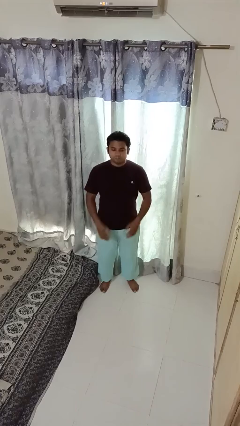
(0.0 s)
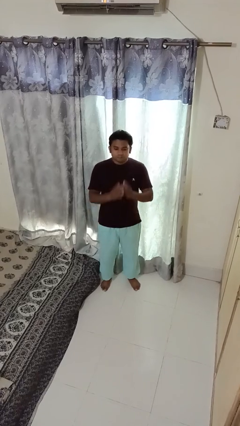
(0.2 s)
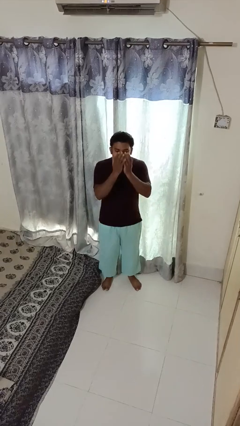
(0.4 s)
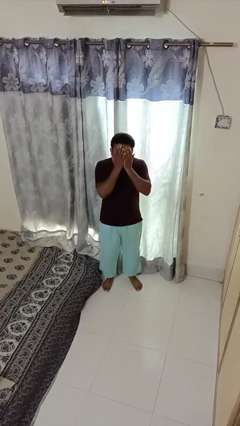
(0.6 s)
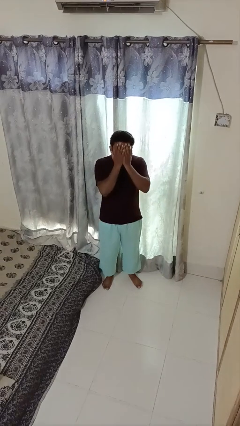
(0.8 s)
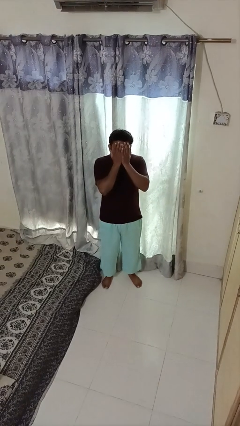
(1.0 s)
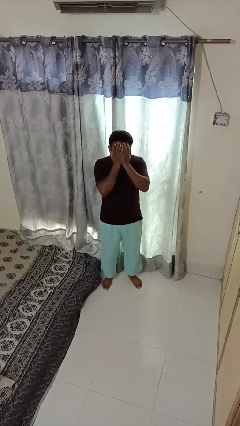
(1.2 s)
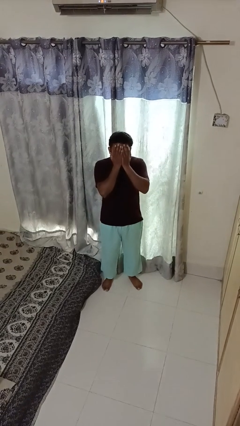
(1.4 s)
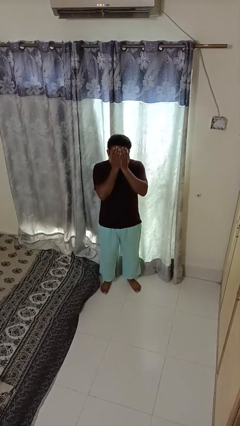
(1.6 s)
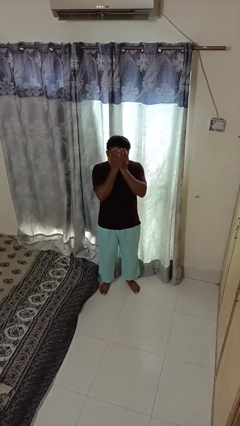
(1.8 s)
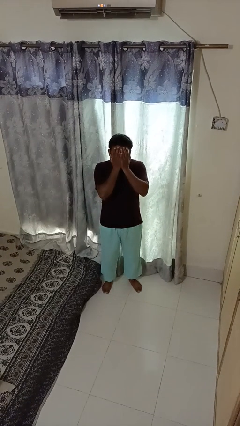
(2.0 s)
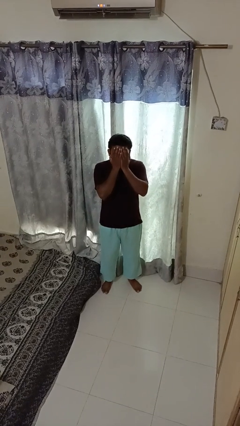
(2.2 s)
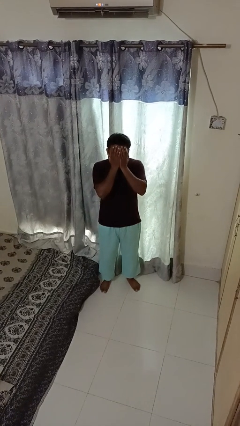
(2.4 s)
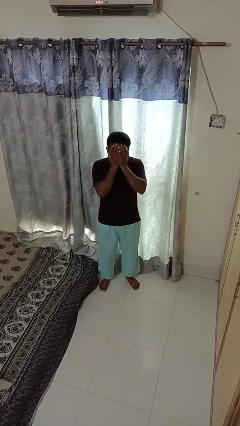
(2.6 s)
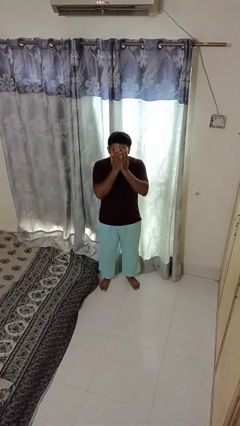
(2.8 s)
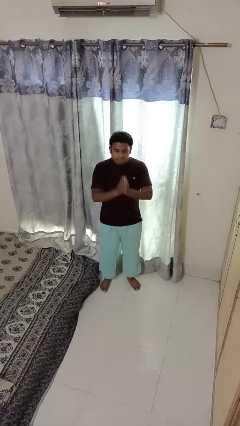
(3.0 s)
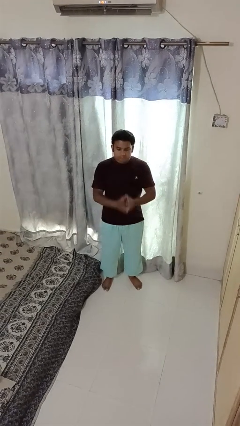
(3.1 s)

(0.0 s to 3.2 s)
person covers face with hands

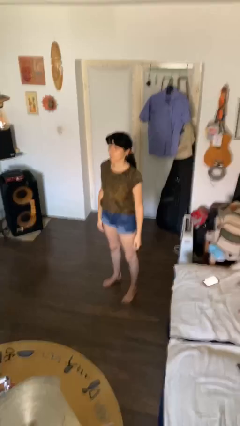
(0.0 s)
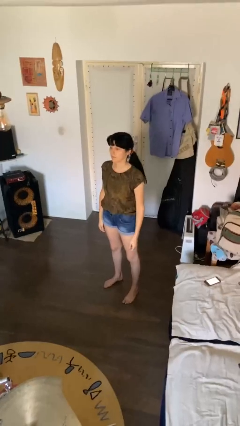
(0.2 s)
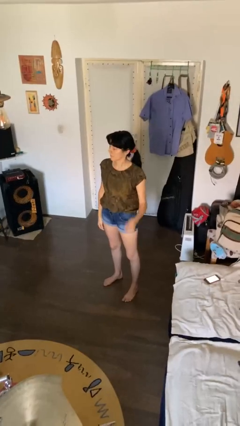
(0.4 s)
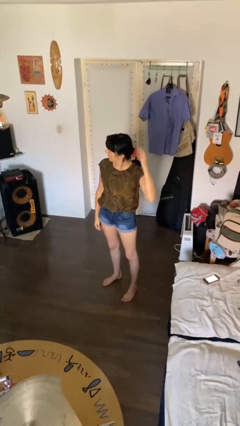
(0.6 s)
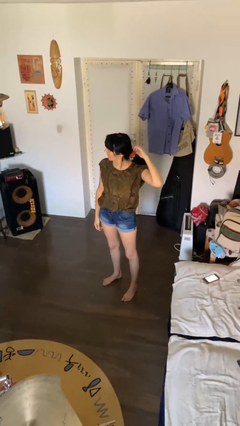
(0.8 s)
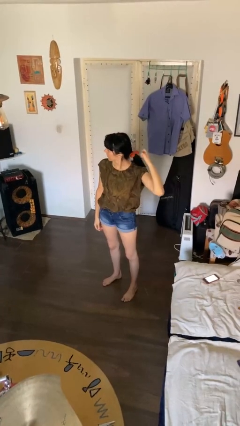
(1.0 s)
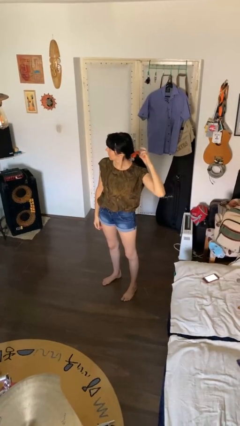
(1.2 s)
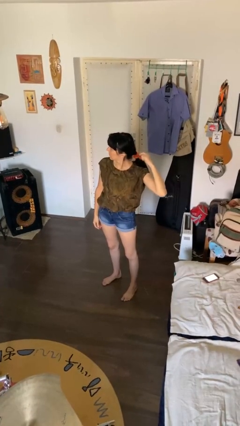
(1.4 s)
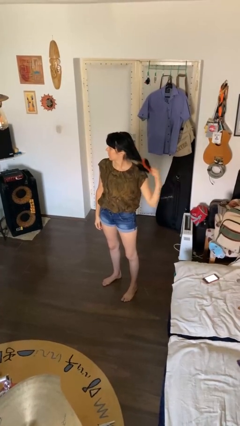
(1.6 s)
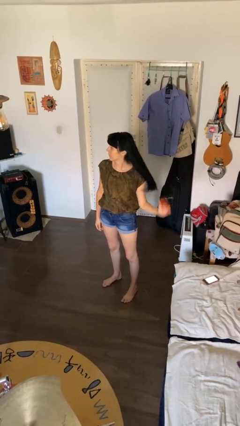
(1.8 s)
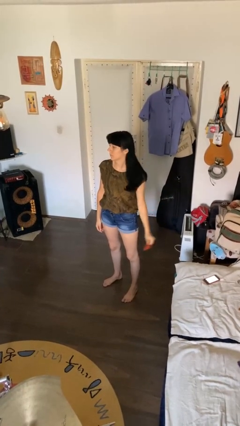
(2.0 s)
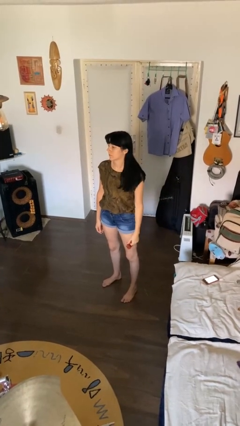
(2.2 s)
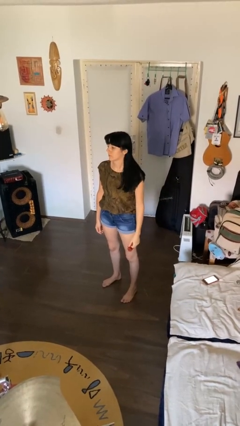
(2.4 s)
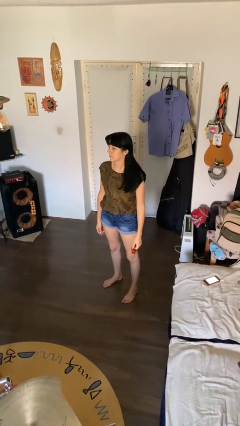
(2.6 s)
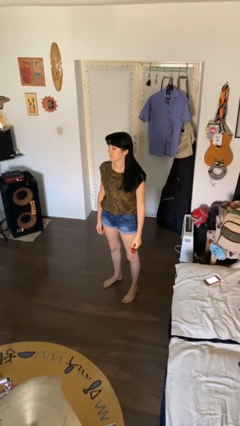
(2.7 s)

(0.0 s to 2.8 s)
person takes off hairtie

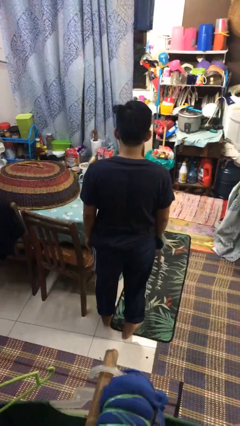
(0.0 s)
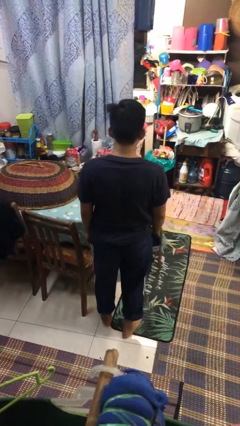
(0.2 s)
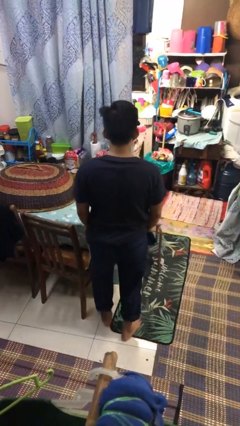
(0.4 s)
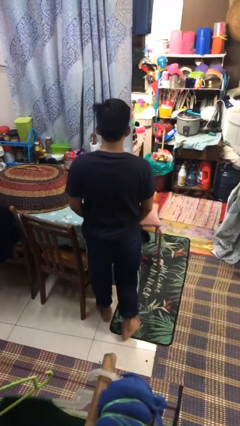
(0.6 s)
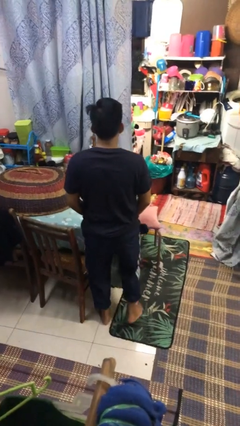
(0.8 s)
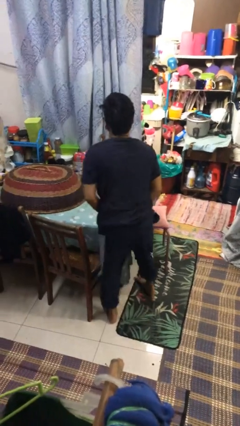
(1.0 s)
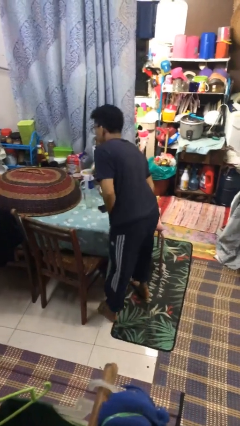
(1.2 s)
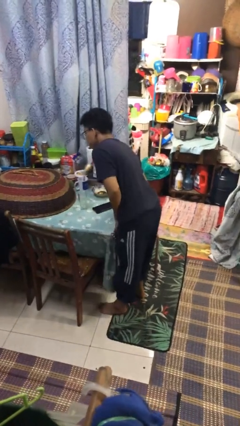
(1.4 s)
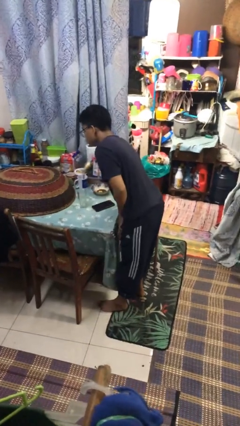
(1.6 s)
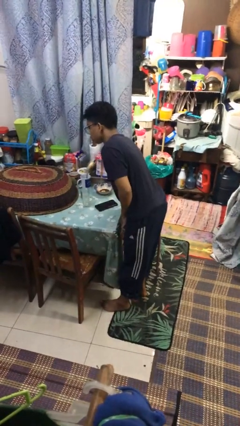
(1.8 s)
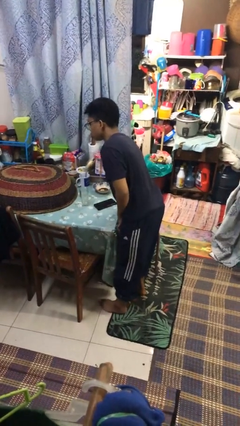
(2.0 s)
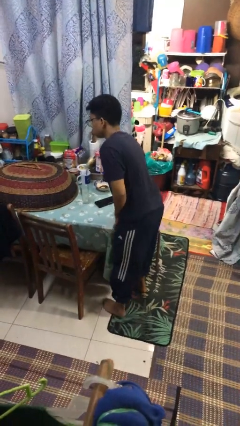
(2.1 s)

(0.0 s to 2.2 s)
person bumps into table

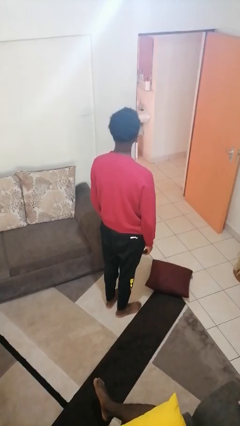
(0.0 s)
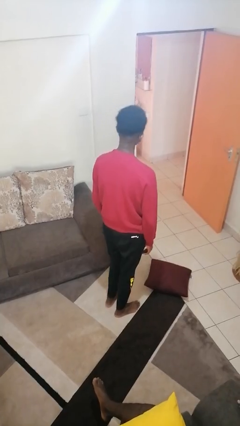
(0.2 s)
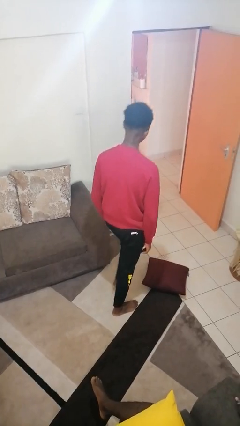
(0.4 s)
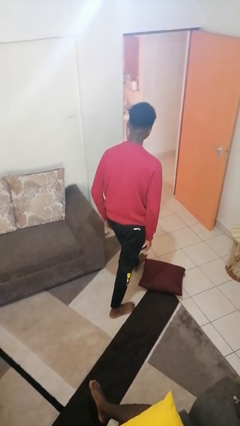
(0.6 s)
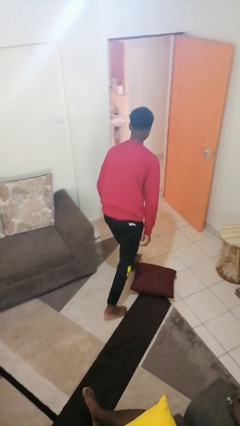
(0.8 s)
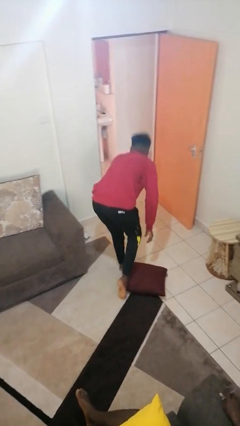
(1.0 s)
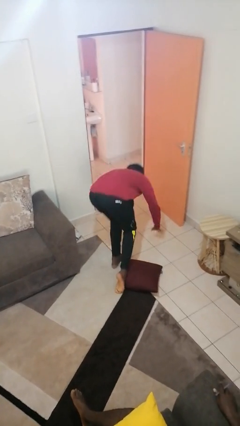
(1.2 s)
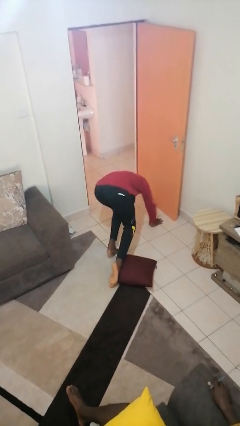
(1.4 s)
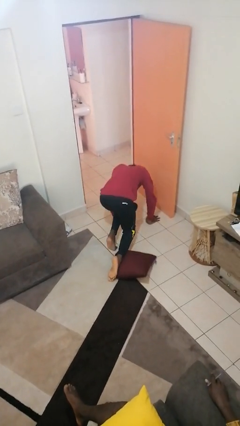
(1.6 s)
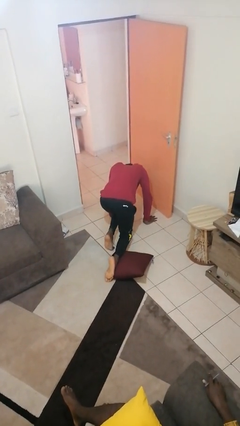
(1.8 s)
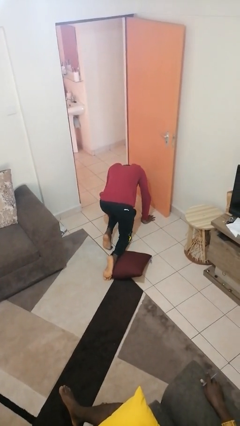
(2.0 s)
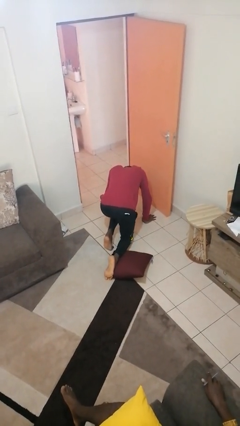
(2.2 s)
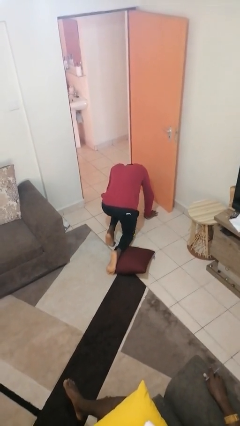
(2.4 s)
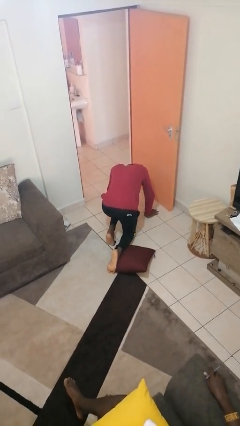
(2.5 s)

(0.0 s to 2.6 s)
person trips on object on floor

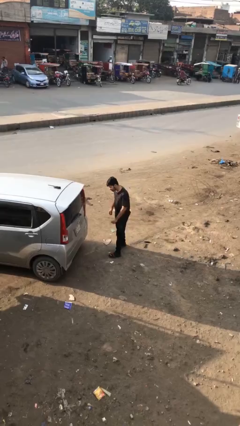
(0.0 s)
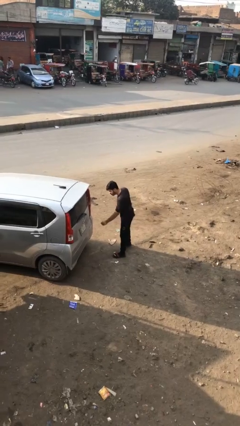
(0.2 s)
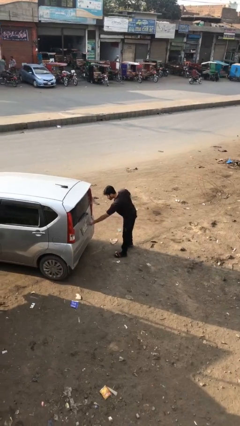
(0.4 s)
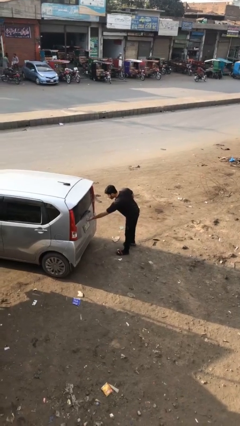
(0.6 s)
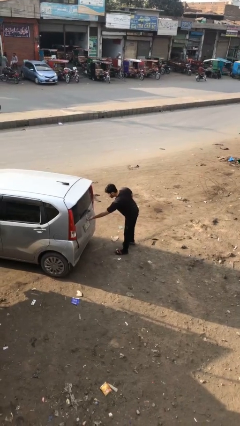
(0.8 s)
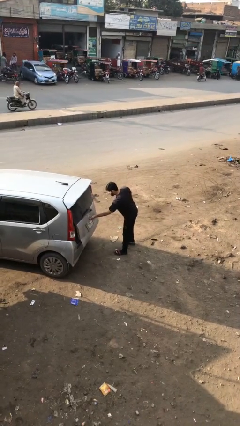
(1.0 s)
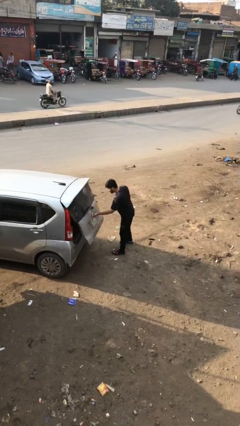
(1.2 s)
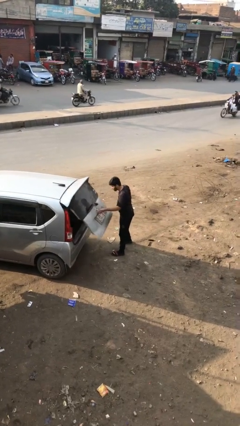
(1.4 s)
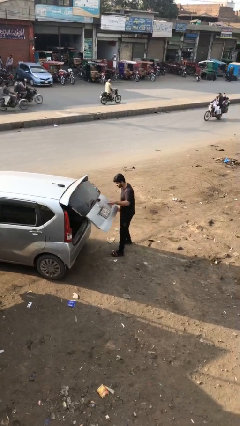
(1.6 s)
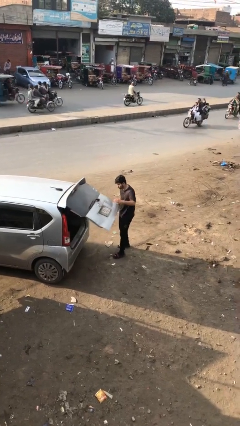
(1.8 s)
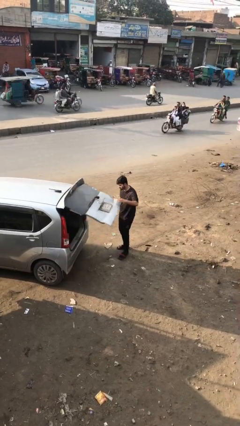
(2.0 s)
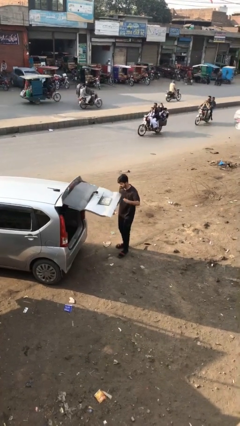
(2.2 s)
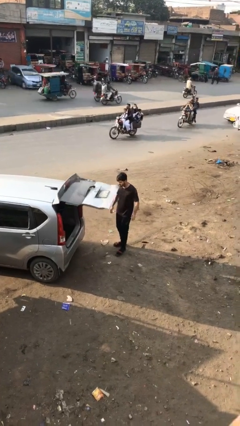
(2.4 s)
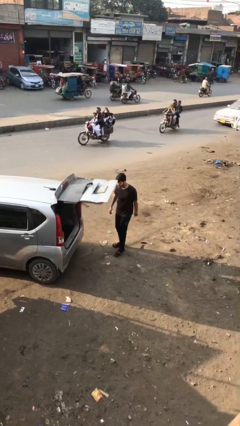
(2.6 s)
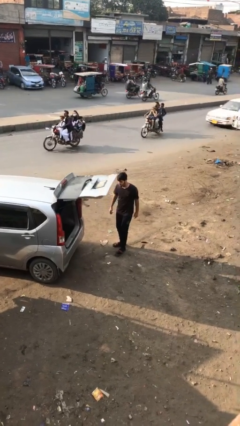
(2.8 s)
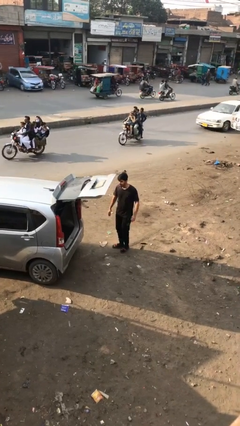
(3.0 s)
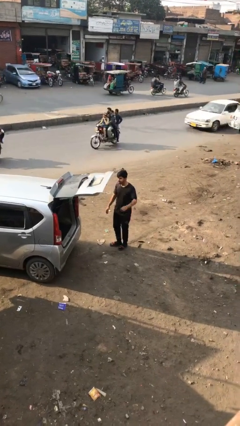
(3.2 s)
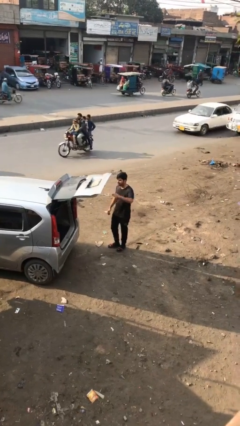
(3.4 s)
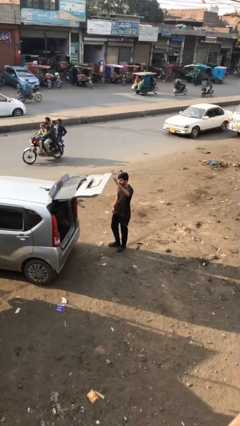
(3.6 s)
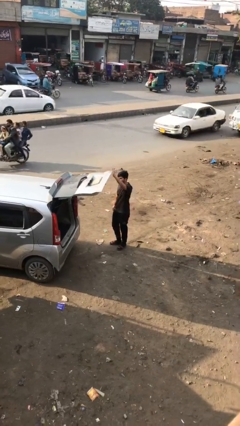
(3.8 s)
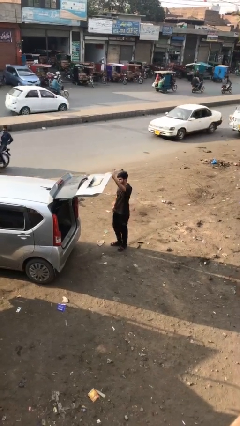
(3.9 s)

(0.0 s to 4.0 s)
person opens car trunk

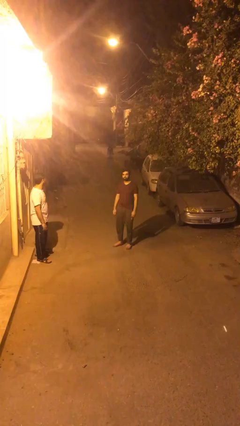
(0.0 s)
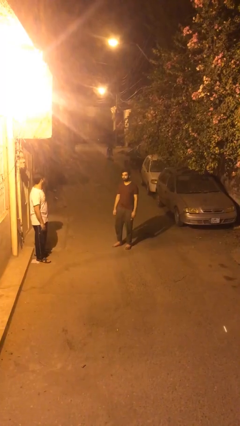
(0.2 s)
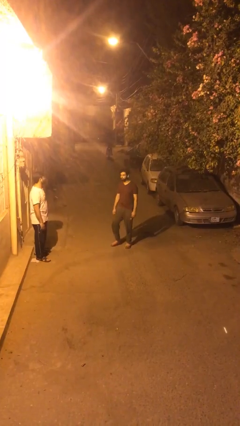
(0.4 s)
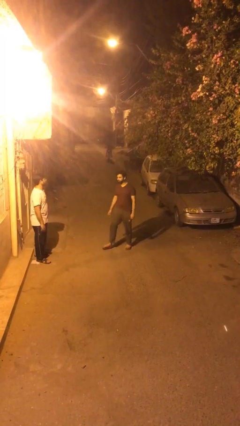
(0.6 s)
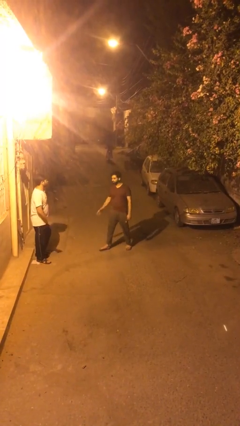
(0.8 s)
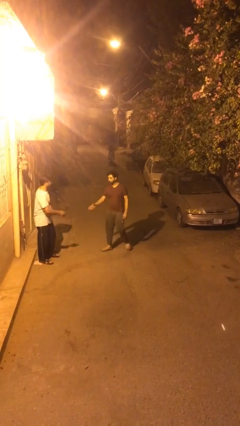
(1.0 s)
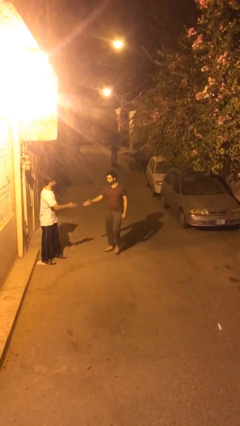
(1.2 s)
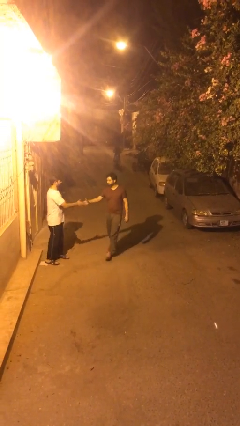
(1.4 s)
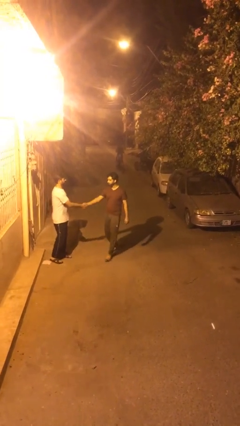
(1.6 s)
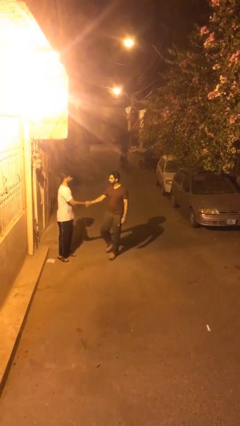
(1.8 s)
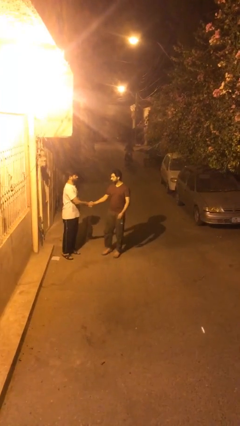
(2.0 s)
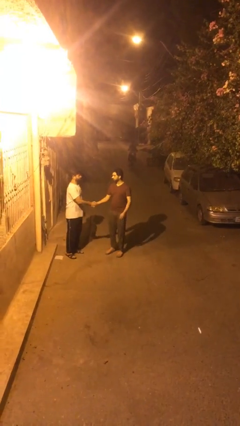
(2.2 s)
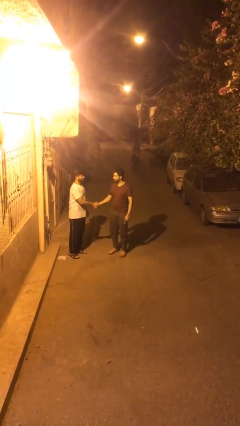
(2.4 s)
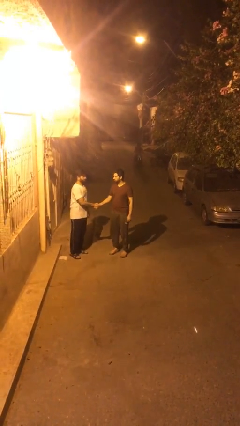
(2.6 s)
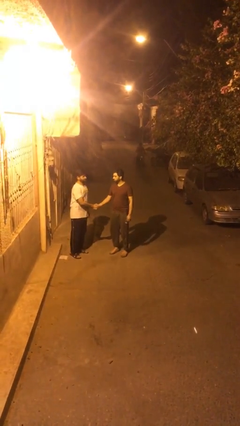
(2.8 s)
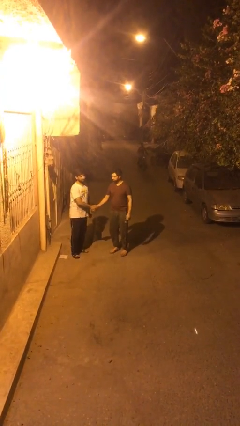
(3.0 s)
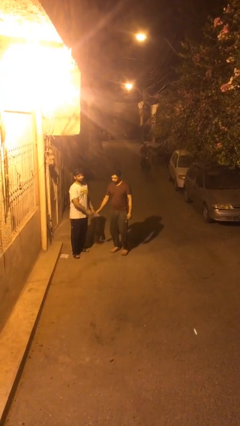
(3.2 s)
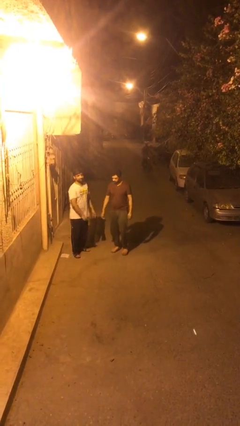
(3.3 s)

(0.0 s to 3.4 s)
person shakes hand
